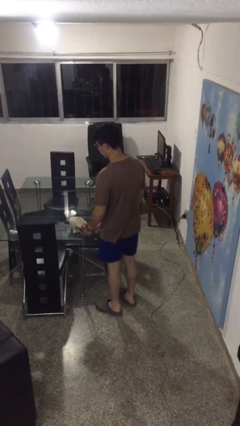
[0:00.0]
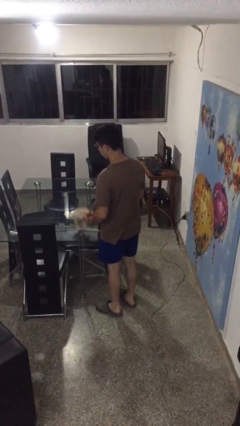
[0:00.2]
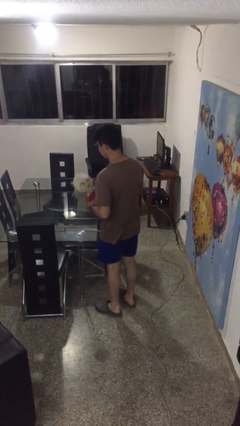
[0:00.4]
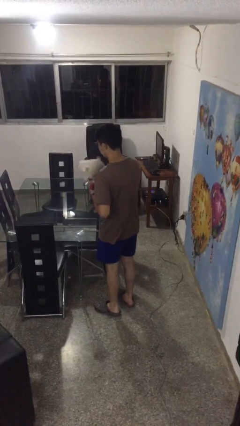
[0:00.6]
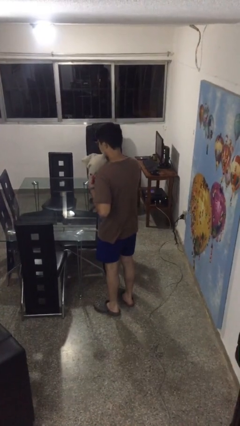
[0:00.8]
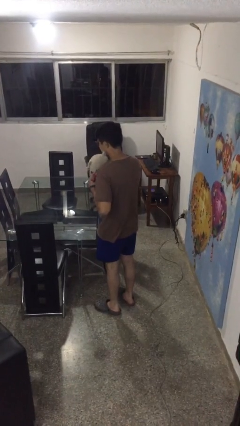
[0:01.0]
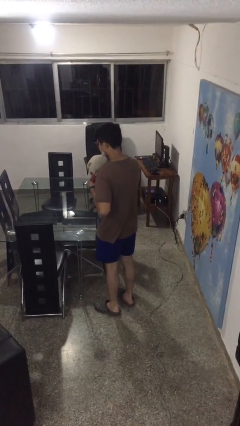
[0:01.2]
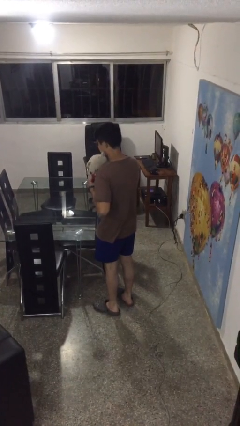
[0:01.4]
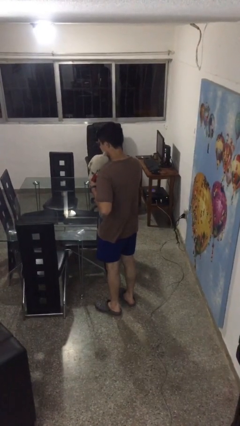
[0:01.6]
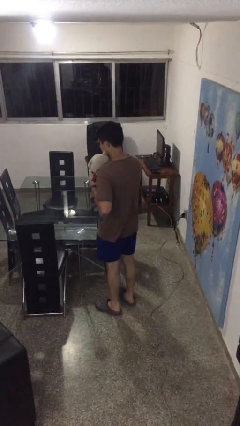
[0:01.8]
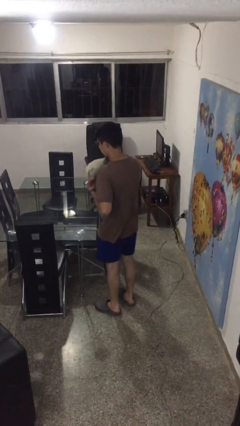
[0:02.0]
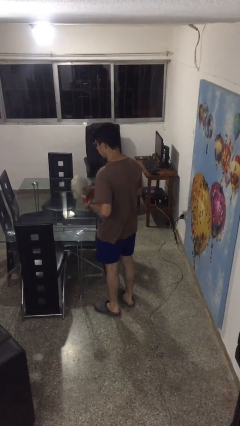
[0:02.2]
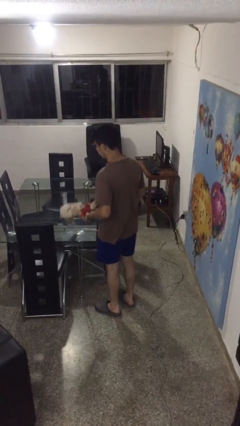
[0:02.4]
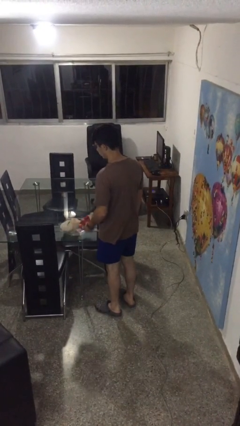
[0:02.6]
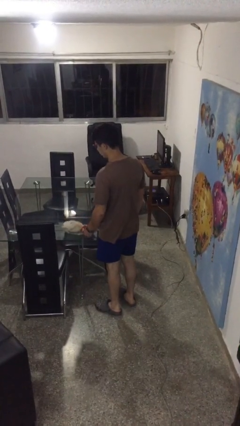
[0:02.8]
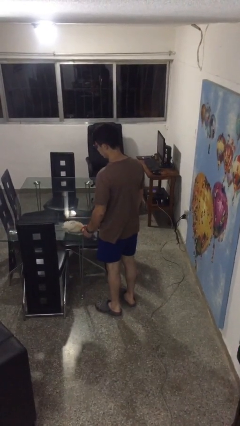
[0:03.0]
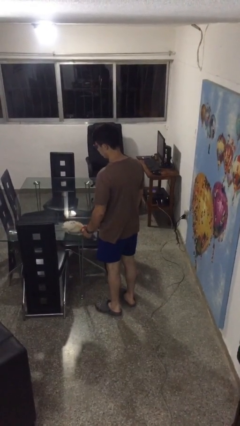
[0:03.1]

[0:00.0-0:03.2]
person hugs stuffed animal

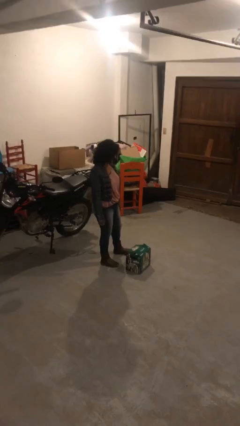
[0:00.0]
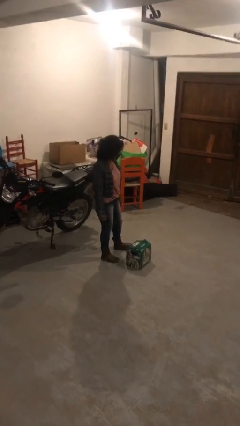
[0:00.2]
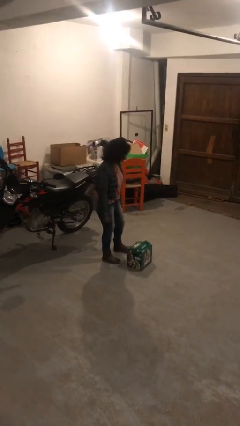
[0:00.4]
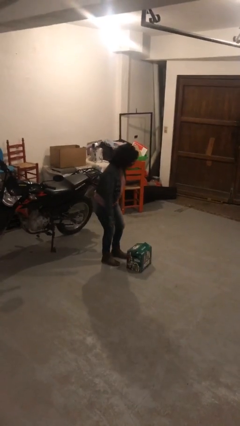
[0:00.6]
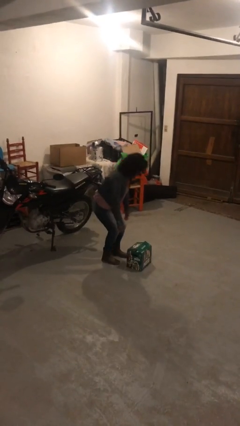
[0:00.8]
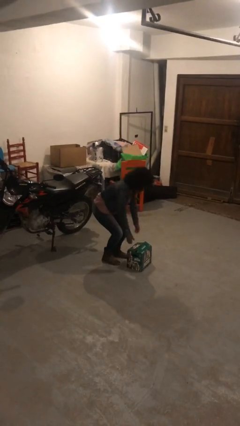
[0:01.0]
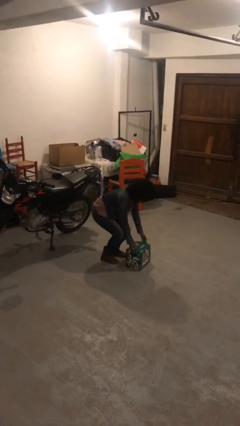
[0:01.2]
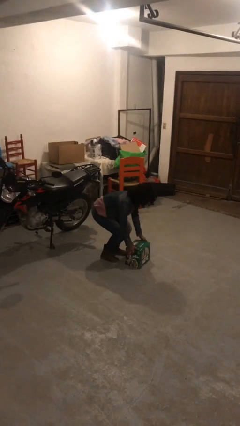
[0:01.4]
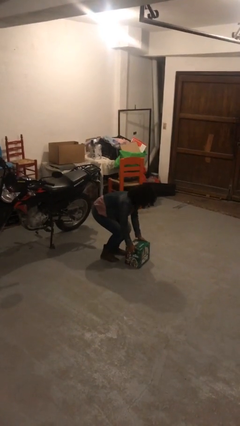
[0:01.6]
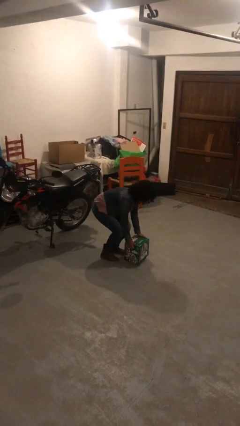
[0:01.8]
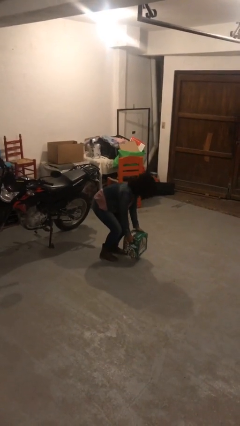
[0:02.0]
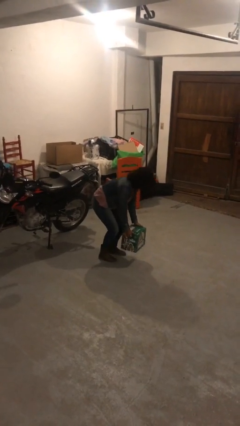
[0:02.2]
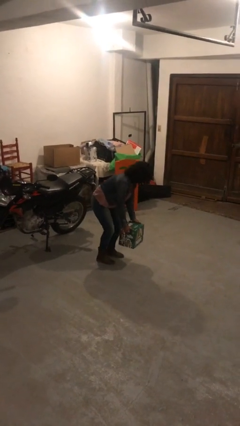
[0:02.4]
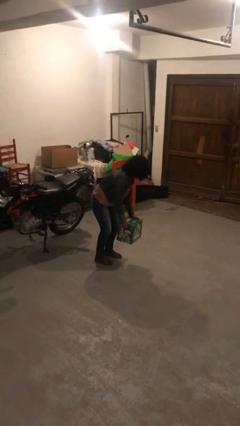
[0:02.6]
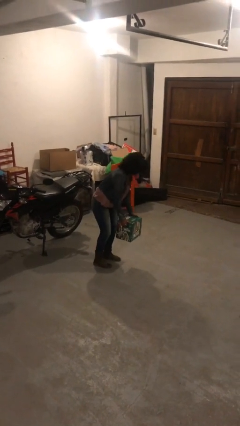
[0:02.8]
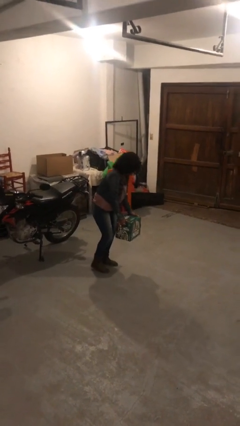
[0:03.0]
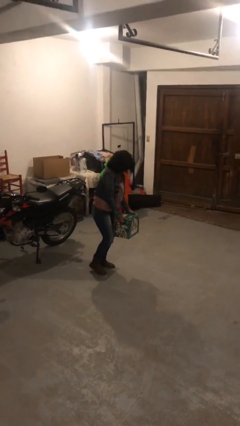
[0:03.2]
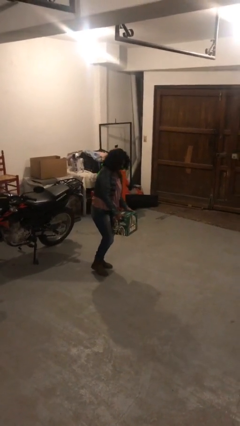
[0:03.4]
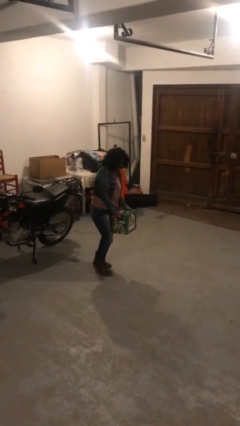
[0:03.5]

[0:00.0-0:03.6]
person picks up object from floor

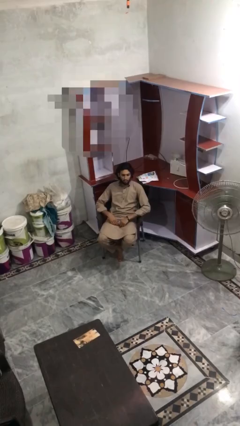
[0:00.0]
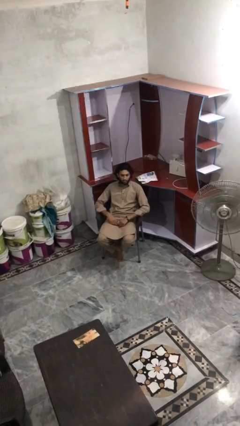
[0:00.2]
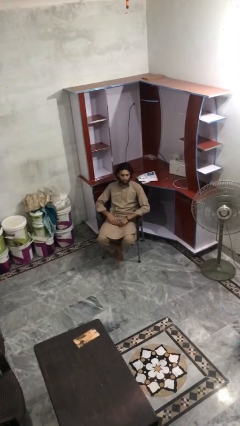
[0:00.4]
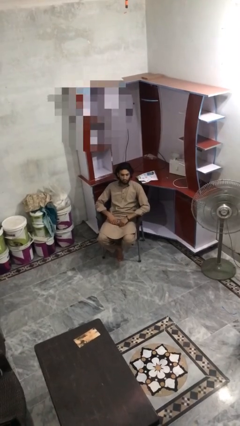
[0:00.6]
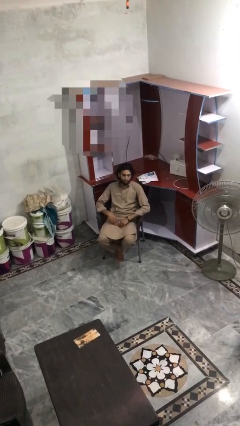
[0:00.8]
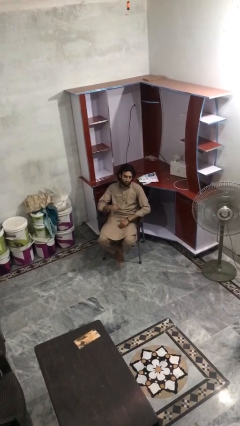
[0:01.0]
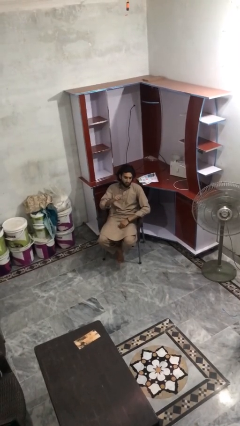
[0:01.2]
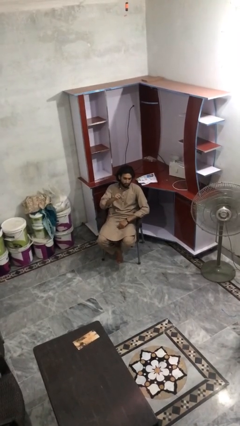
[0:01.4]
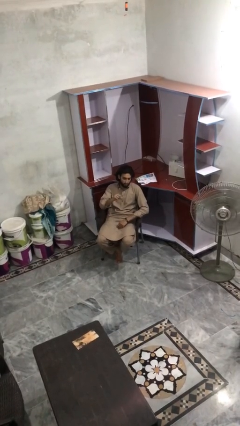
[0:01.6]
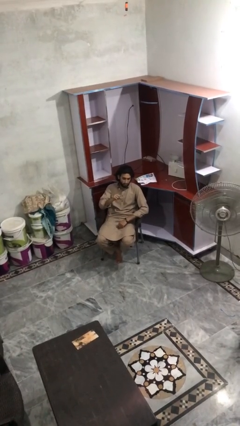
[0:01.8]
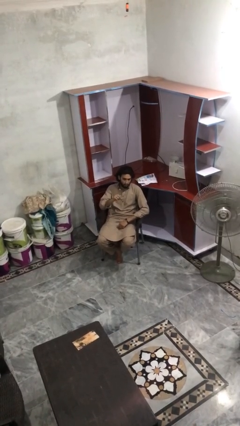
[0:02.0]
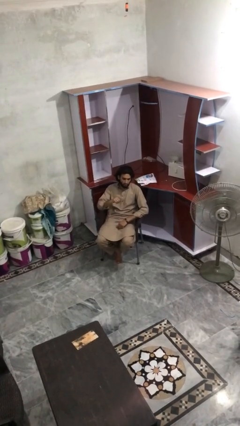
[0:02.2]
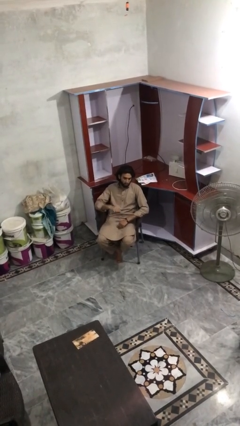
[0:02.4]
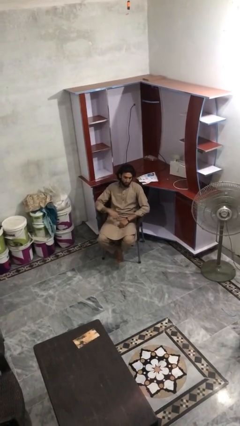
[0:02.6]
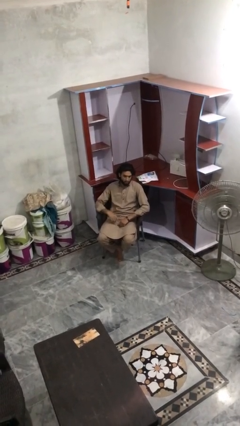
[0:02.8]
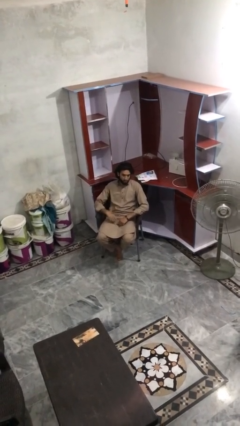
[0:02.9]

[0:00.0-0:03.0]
person gestures number one

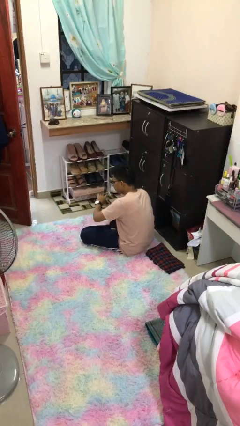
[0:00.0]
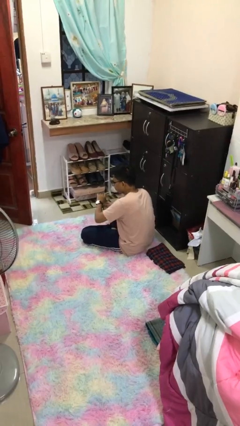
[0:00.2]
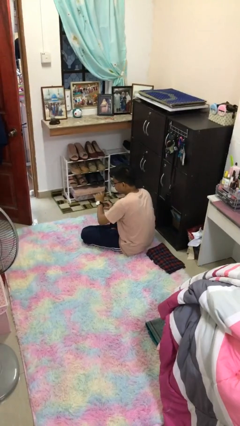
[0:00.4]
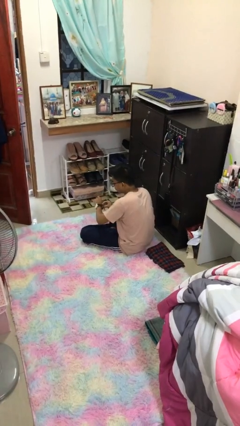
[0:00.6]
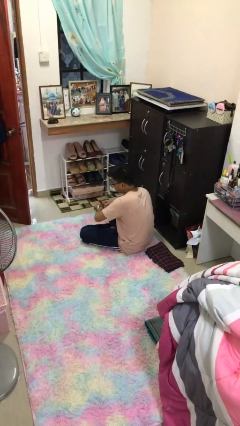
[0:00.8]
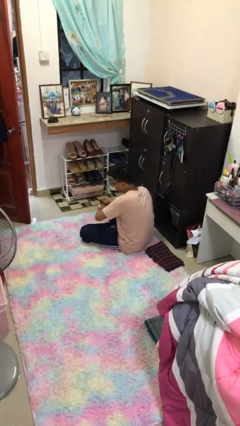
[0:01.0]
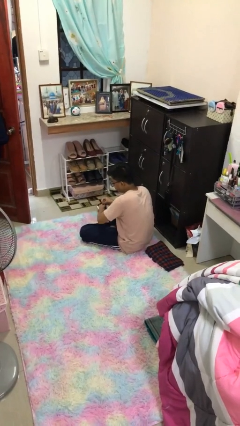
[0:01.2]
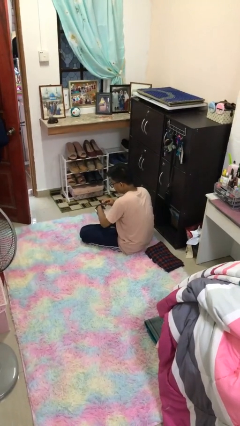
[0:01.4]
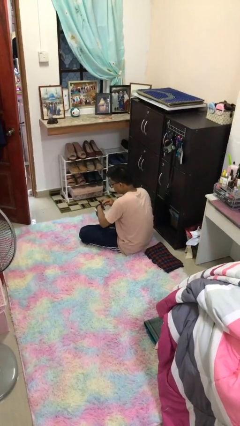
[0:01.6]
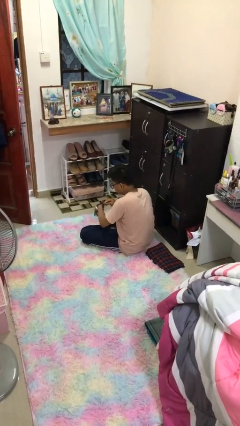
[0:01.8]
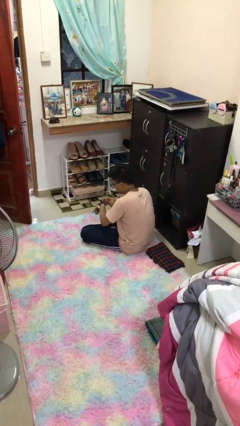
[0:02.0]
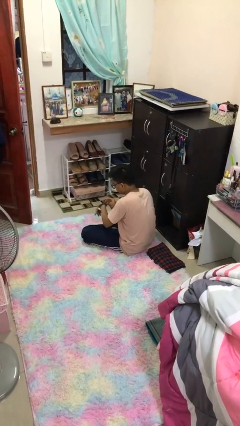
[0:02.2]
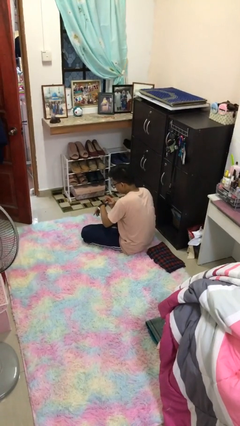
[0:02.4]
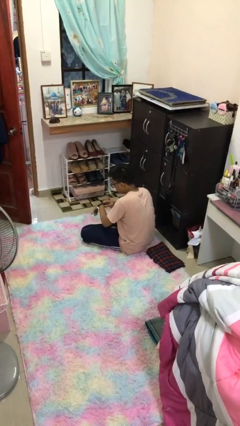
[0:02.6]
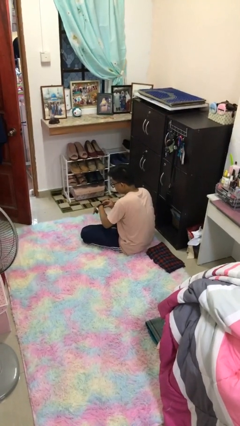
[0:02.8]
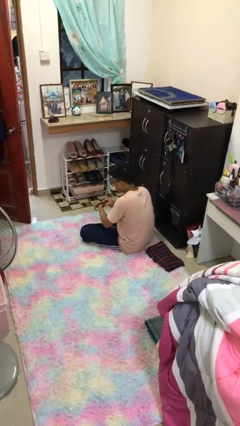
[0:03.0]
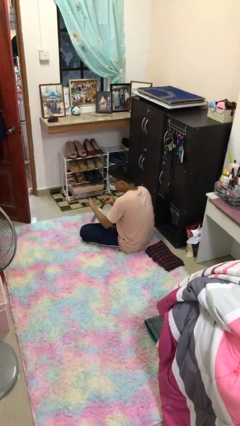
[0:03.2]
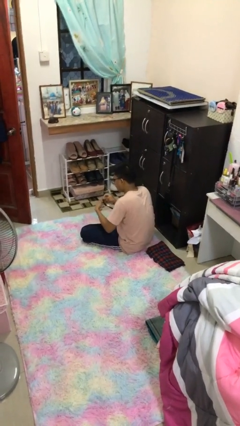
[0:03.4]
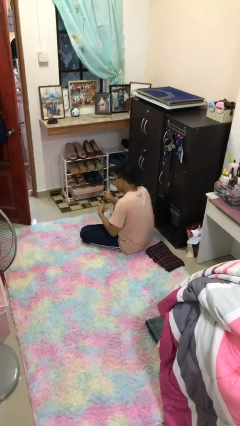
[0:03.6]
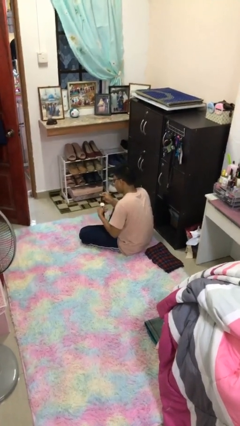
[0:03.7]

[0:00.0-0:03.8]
person takes off wristwatch

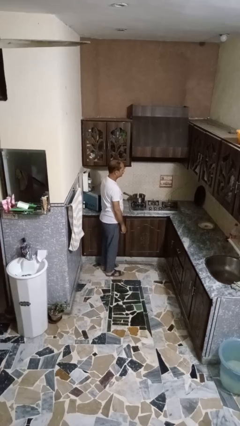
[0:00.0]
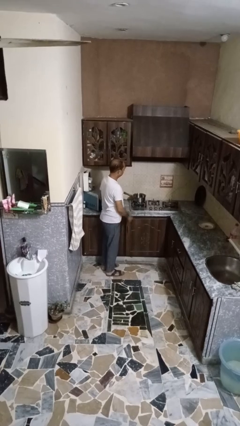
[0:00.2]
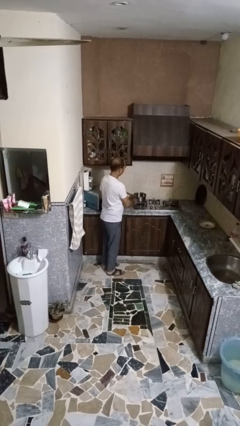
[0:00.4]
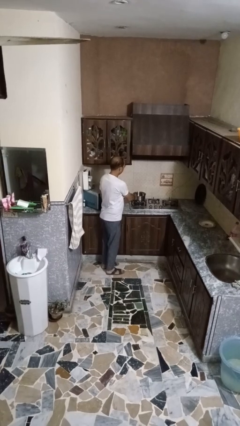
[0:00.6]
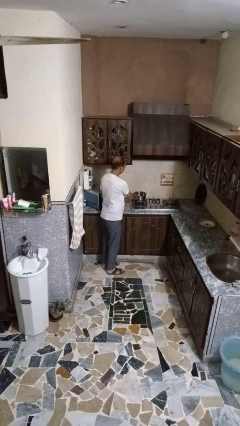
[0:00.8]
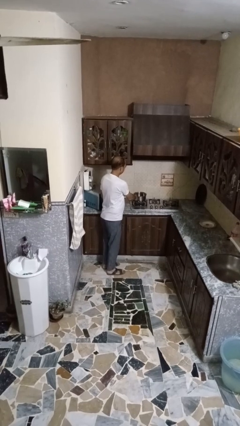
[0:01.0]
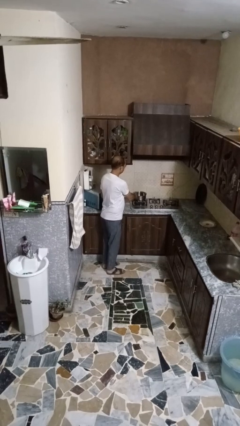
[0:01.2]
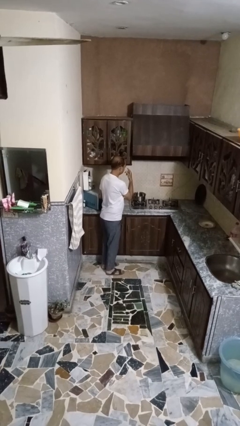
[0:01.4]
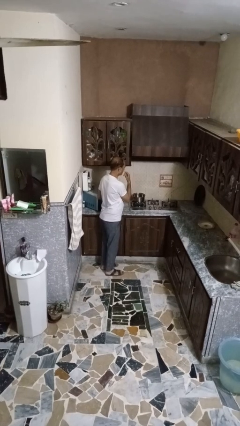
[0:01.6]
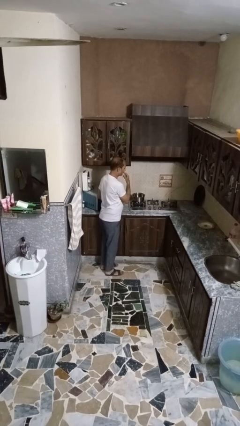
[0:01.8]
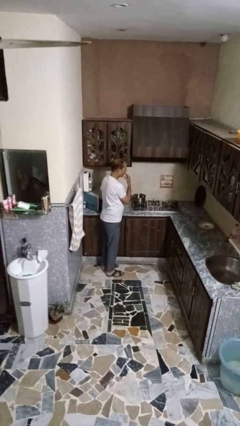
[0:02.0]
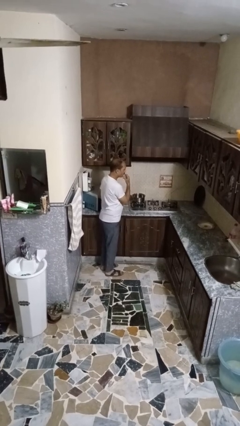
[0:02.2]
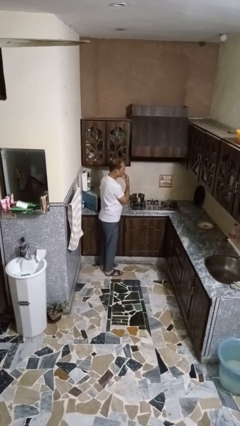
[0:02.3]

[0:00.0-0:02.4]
person burns hand

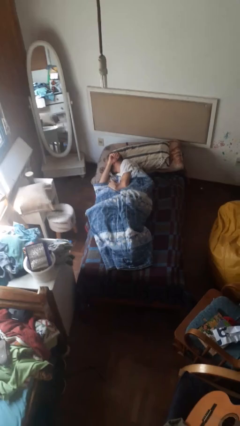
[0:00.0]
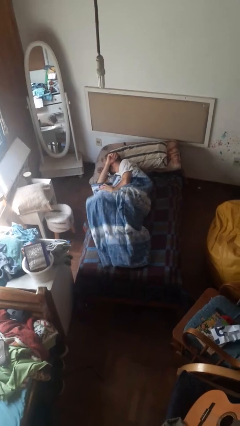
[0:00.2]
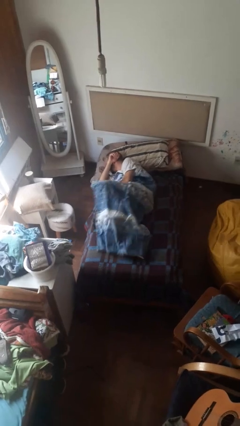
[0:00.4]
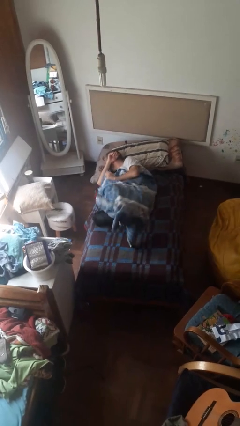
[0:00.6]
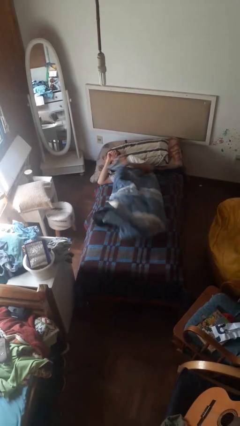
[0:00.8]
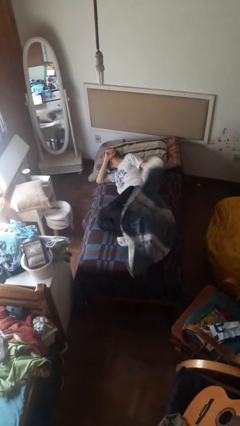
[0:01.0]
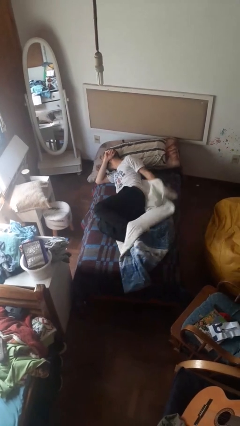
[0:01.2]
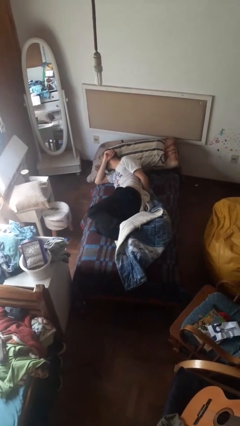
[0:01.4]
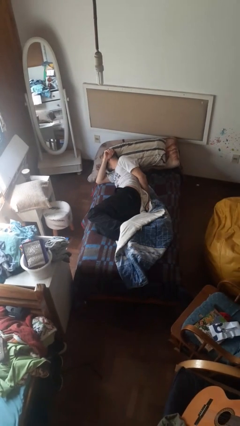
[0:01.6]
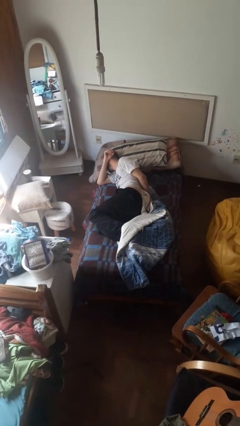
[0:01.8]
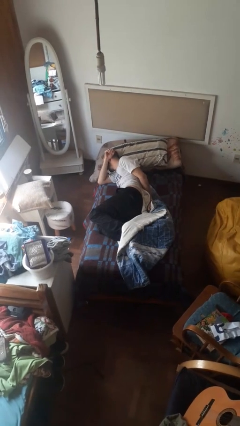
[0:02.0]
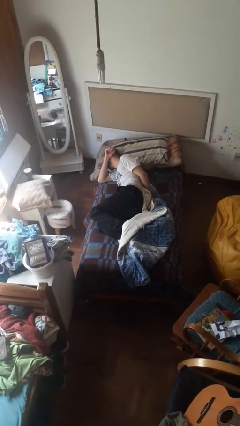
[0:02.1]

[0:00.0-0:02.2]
person uncovers with bedsheets
